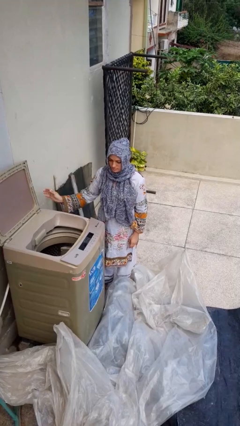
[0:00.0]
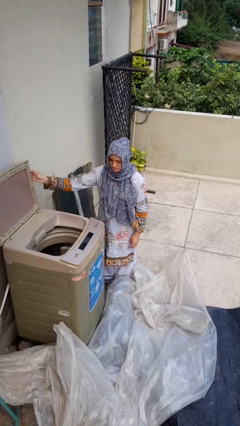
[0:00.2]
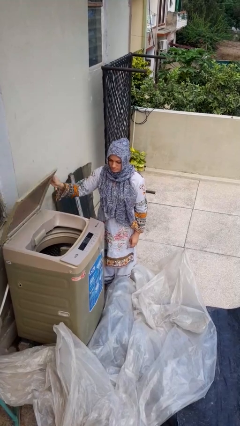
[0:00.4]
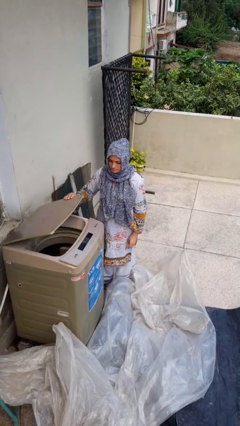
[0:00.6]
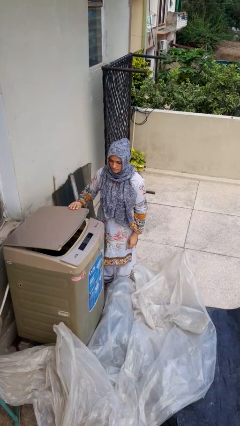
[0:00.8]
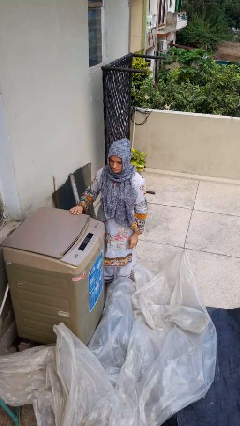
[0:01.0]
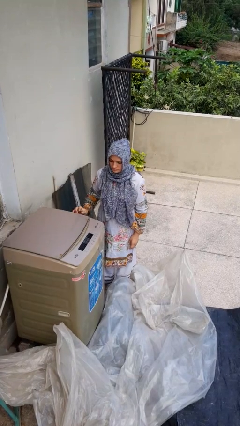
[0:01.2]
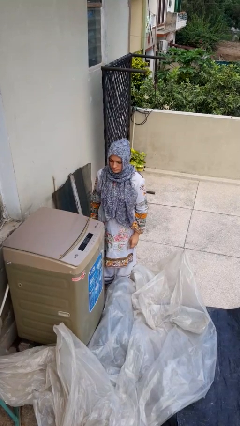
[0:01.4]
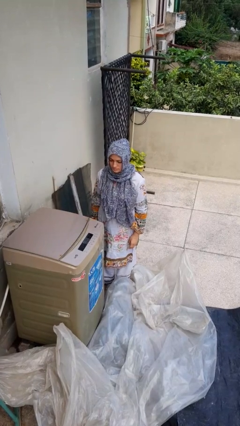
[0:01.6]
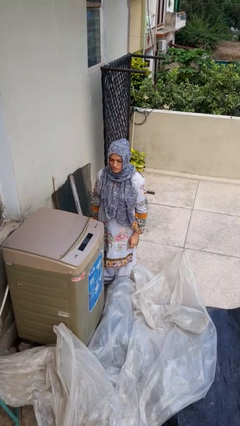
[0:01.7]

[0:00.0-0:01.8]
person closes clothes washer

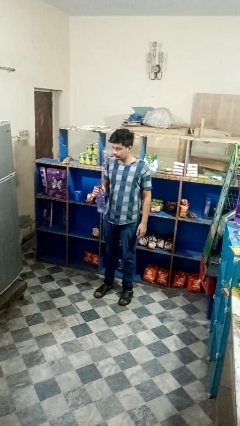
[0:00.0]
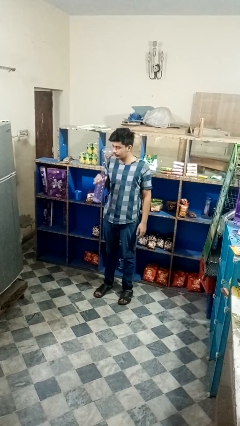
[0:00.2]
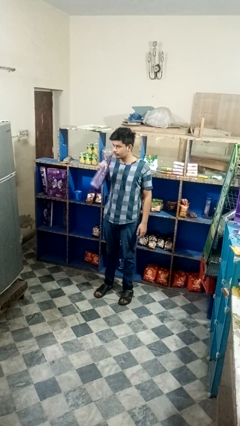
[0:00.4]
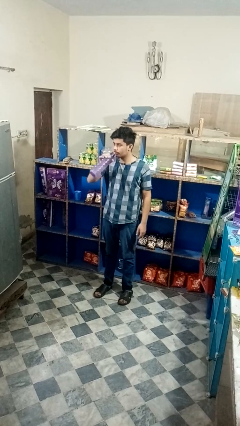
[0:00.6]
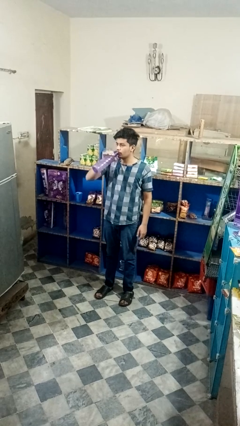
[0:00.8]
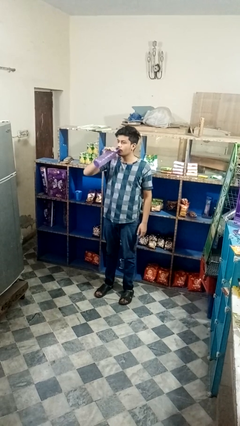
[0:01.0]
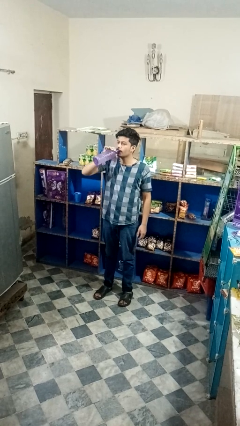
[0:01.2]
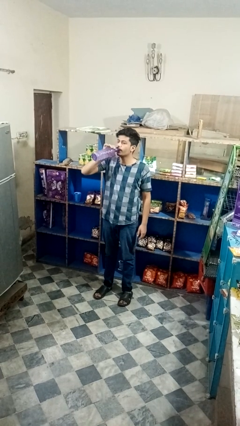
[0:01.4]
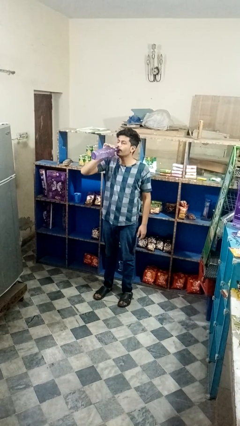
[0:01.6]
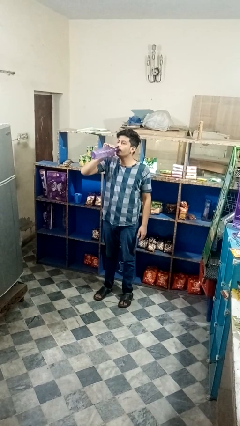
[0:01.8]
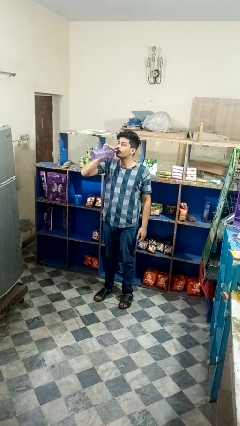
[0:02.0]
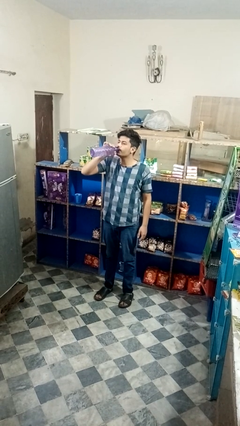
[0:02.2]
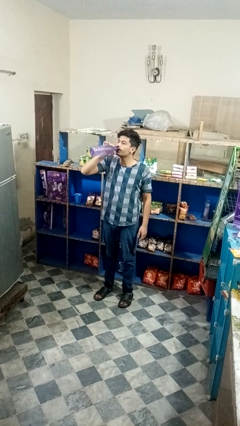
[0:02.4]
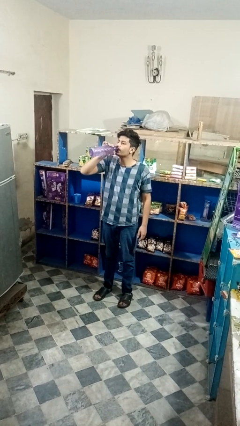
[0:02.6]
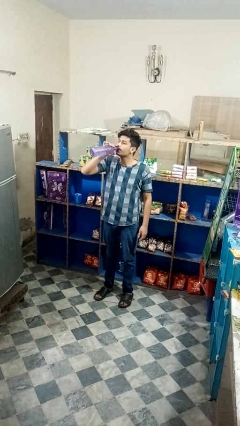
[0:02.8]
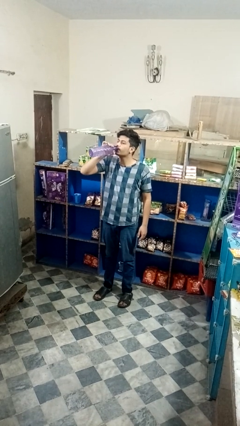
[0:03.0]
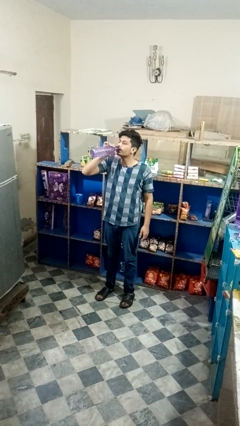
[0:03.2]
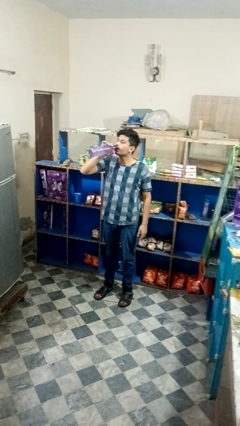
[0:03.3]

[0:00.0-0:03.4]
person drinks from bottle

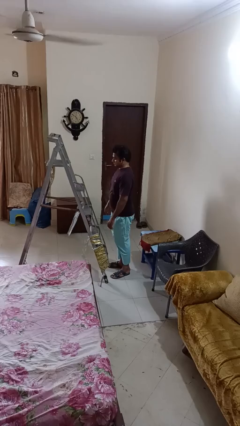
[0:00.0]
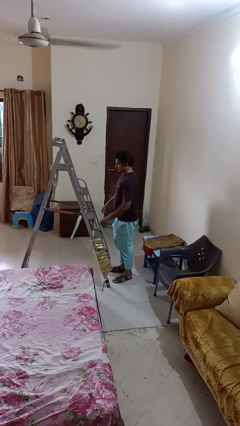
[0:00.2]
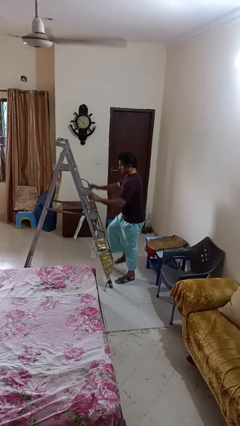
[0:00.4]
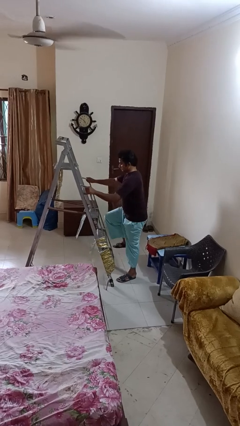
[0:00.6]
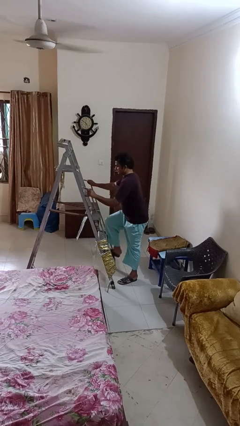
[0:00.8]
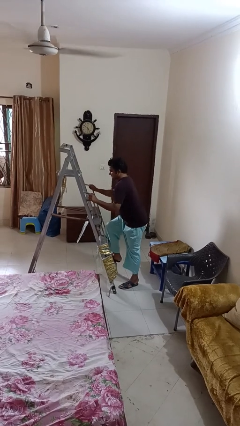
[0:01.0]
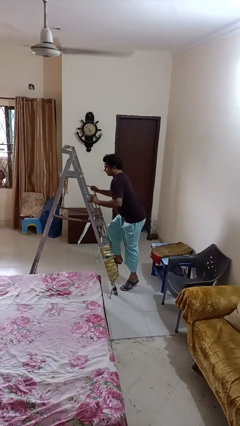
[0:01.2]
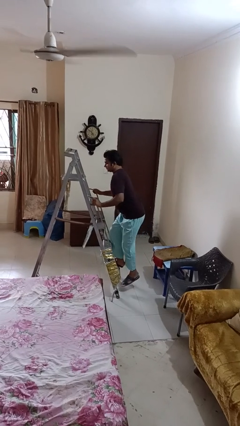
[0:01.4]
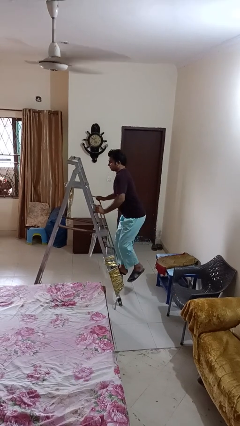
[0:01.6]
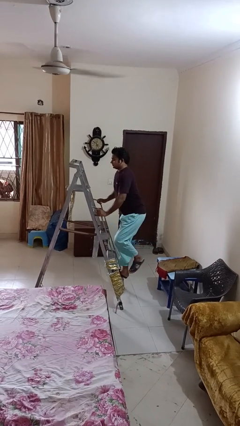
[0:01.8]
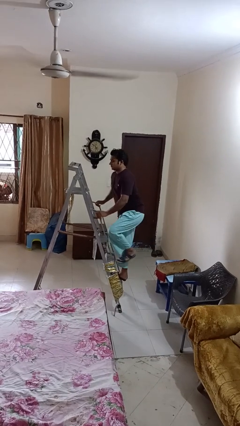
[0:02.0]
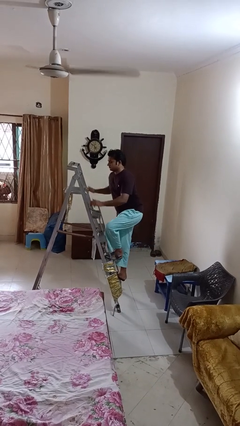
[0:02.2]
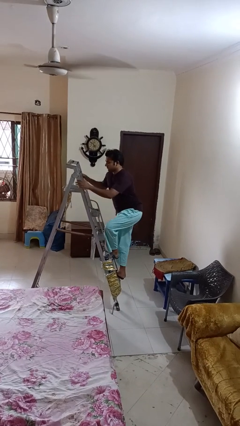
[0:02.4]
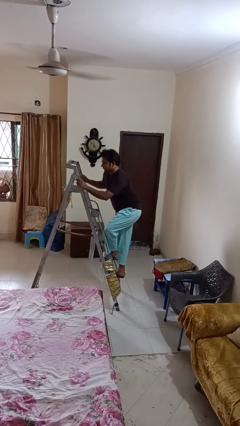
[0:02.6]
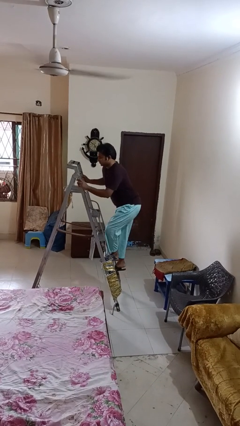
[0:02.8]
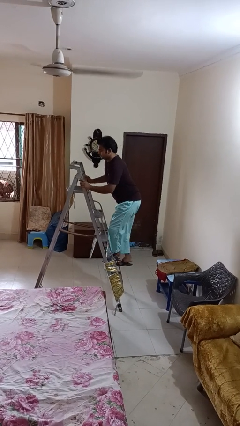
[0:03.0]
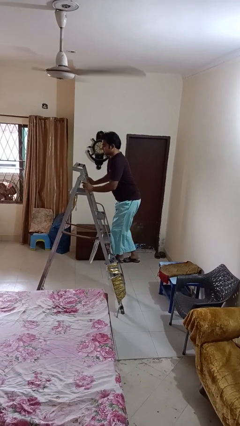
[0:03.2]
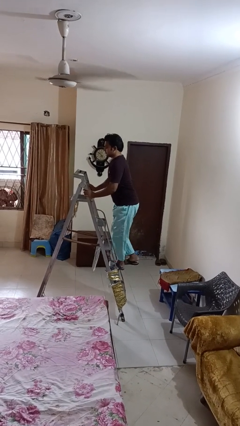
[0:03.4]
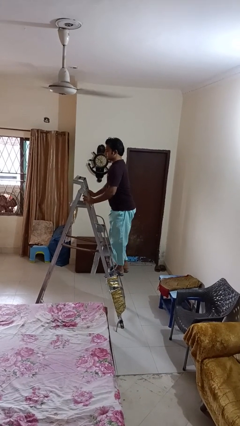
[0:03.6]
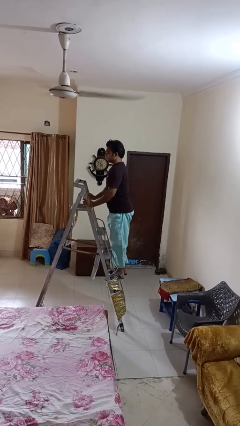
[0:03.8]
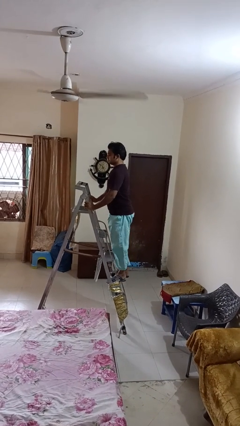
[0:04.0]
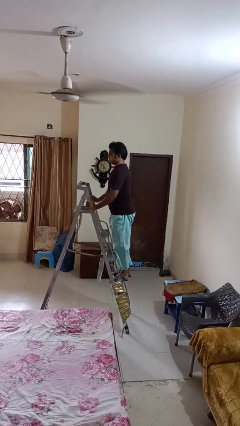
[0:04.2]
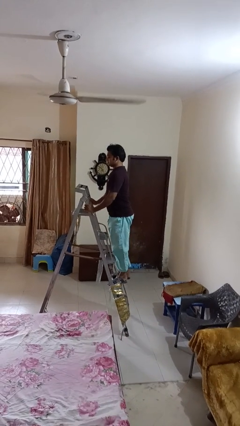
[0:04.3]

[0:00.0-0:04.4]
person climbs up ladder

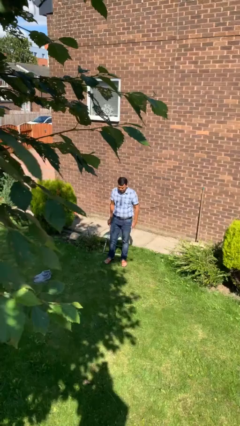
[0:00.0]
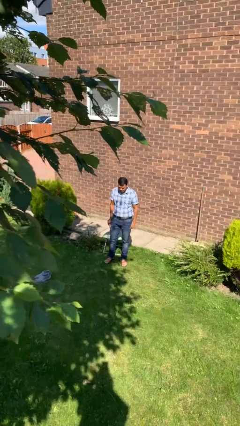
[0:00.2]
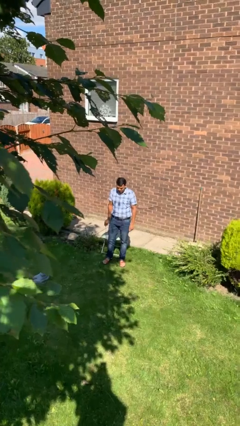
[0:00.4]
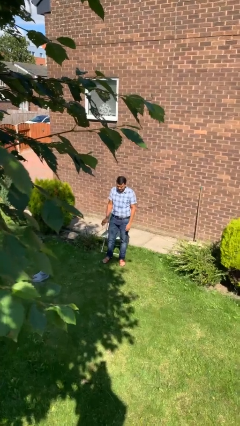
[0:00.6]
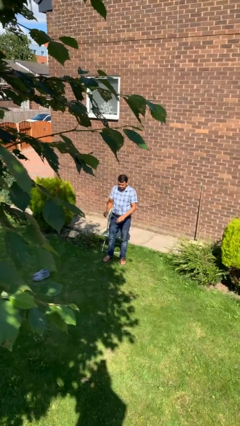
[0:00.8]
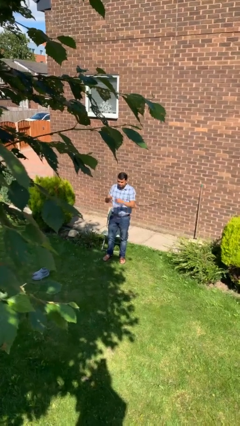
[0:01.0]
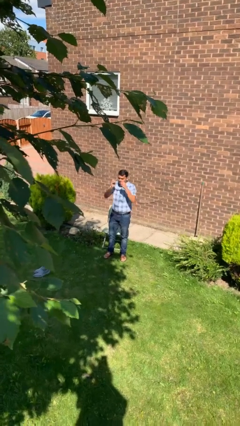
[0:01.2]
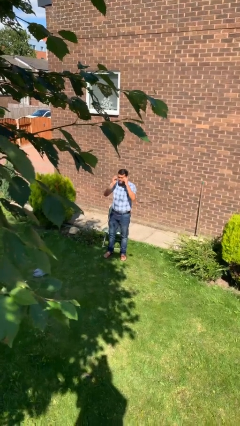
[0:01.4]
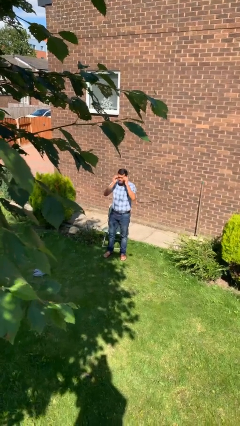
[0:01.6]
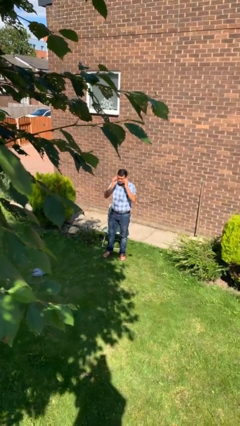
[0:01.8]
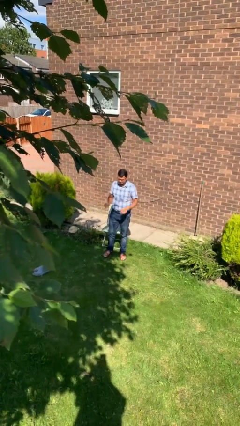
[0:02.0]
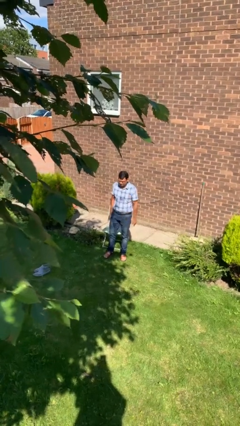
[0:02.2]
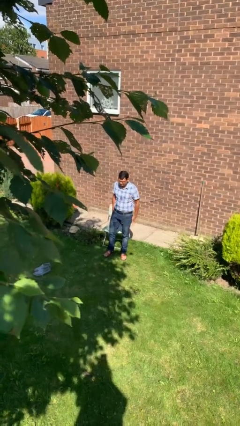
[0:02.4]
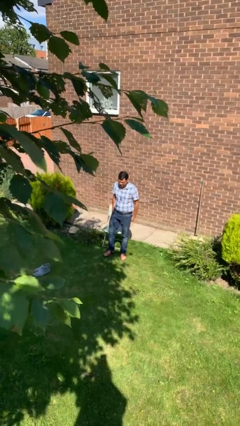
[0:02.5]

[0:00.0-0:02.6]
person puts on glasses

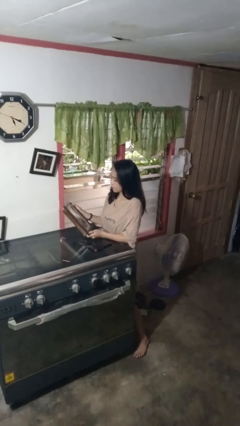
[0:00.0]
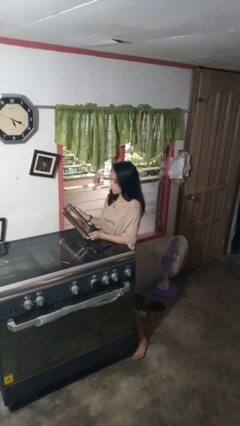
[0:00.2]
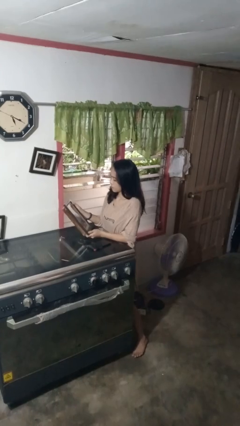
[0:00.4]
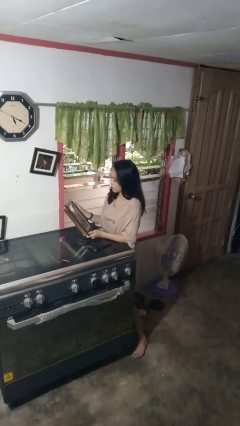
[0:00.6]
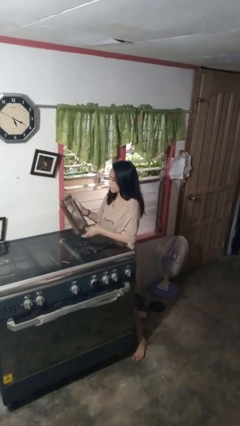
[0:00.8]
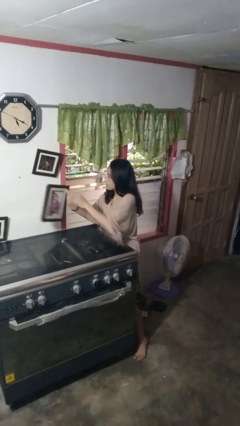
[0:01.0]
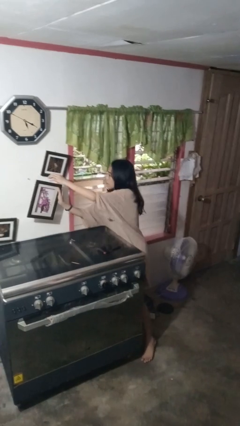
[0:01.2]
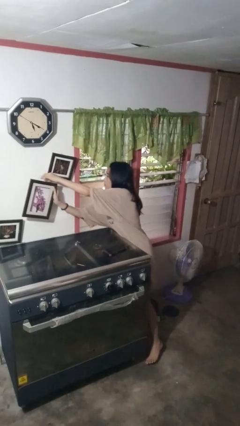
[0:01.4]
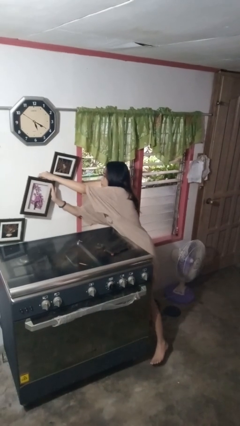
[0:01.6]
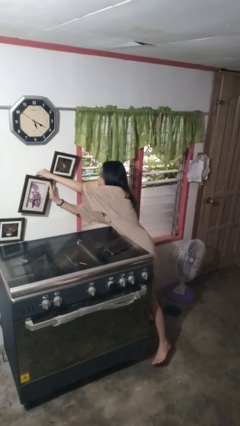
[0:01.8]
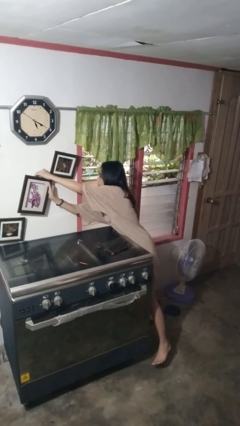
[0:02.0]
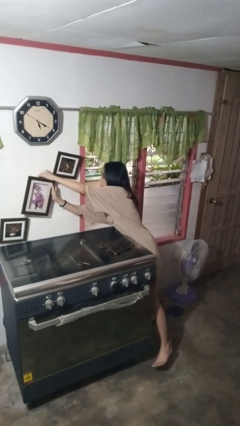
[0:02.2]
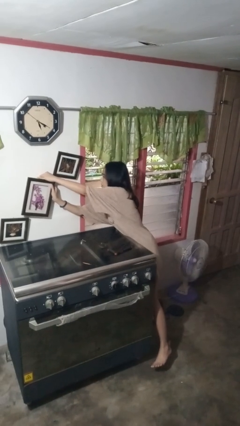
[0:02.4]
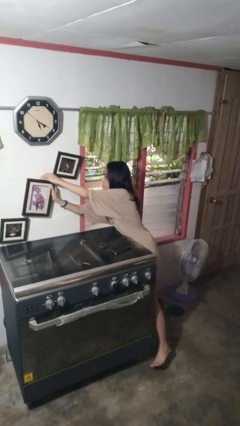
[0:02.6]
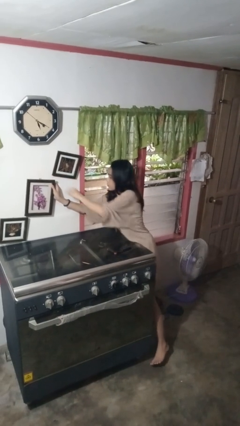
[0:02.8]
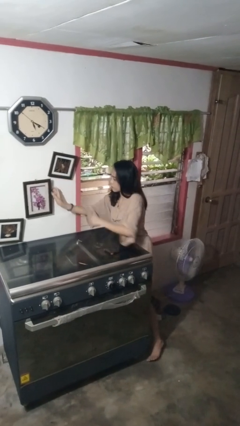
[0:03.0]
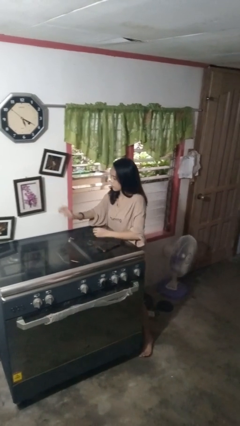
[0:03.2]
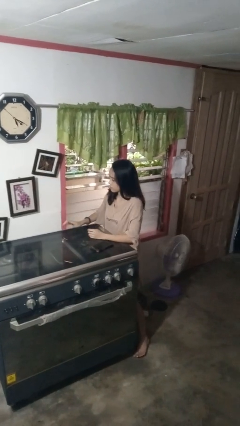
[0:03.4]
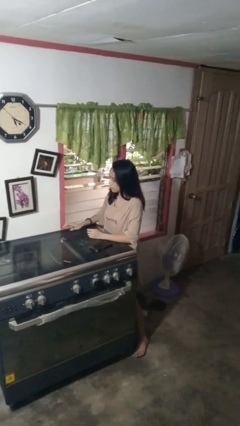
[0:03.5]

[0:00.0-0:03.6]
person puts up picture frame

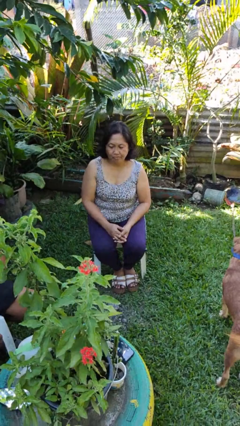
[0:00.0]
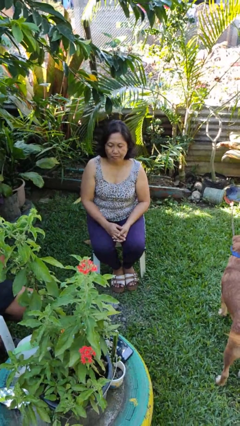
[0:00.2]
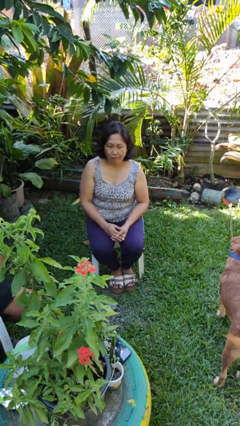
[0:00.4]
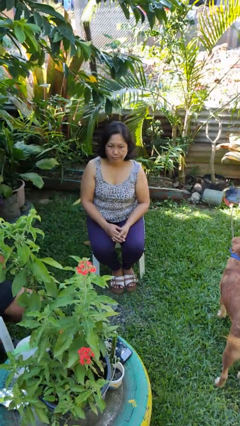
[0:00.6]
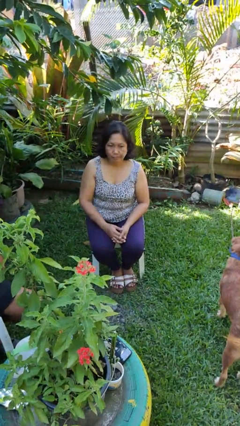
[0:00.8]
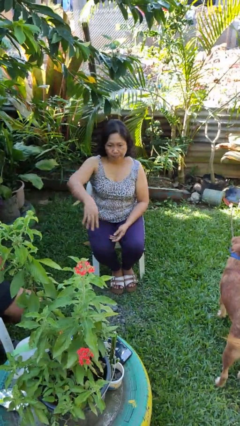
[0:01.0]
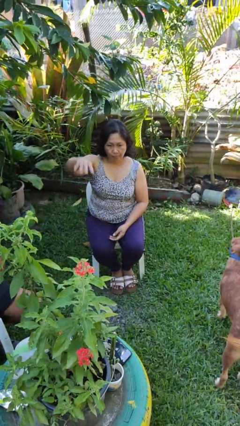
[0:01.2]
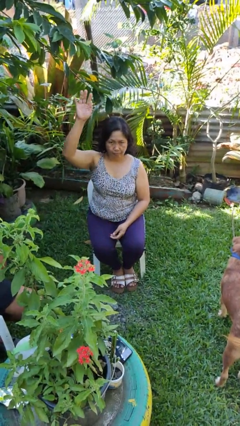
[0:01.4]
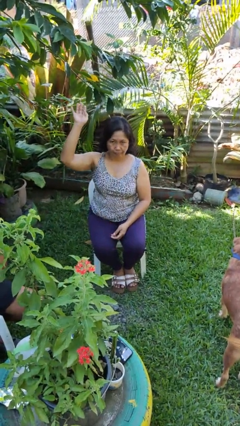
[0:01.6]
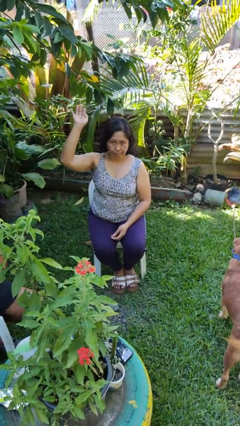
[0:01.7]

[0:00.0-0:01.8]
person gestures raise hand
